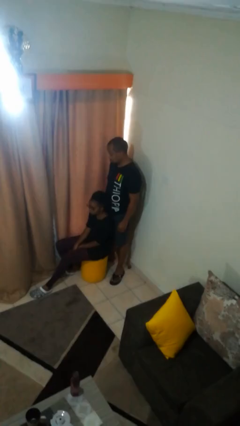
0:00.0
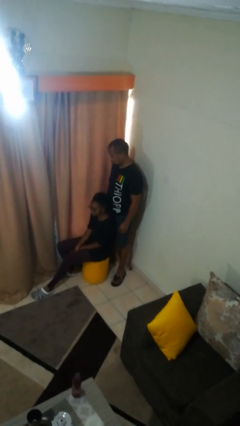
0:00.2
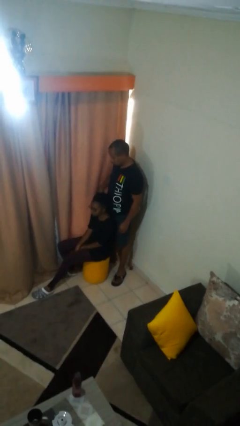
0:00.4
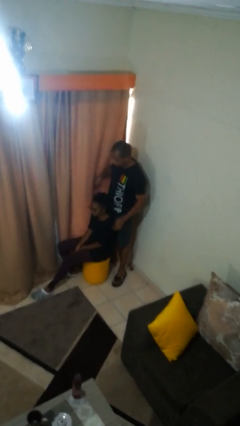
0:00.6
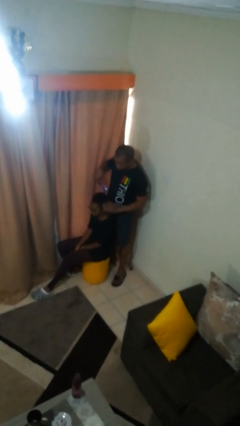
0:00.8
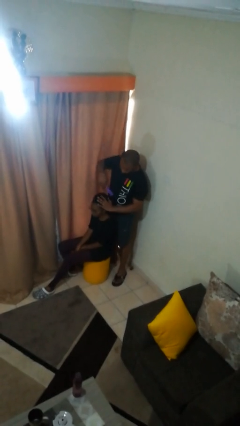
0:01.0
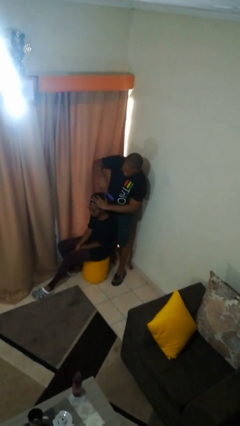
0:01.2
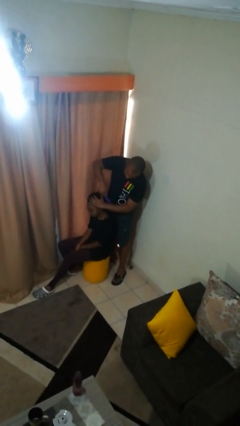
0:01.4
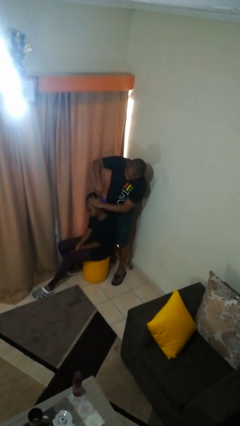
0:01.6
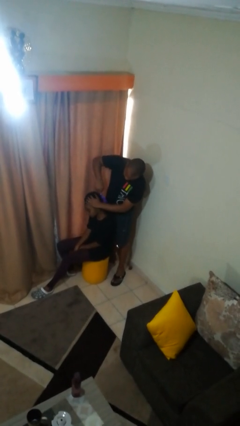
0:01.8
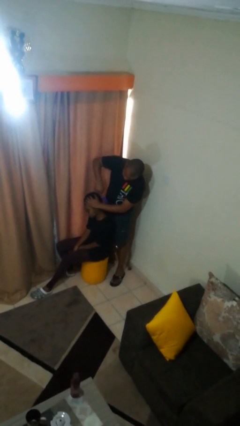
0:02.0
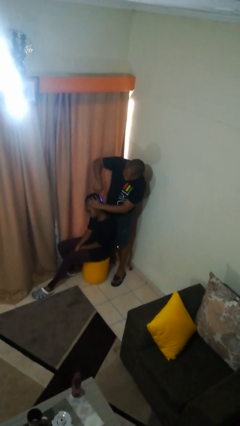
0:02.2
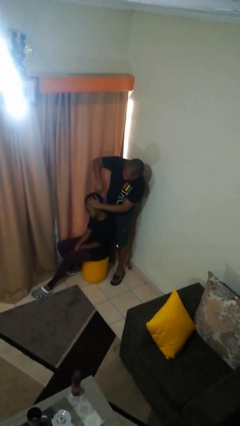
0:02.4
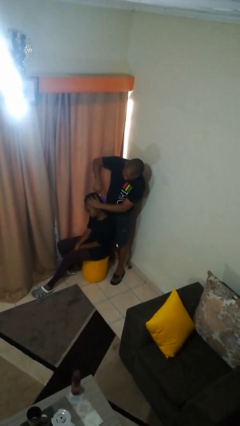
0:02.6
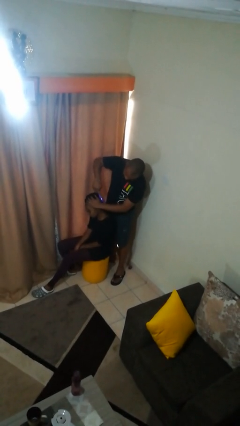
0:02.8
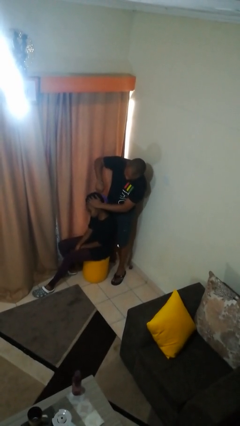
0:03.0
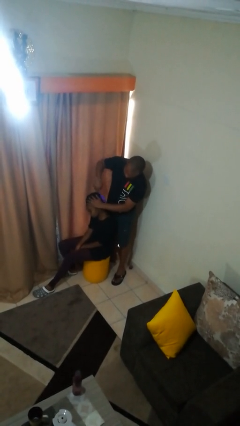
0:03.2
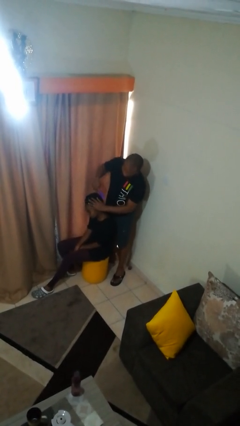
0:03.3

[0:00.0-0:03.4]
person brushes hair of person

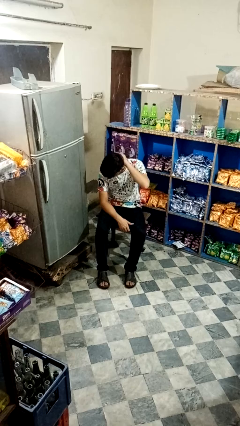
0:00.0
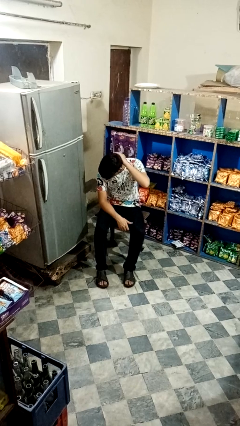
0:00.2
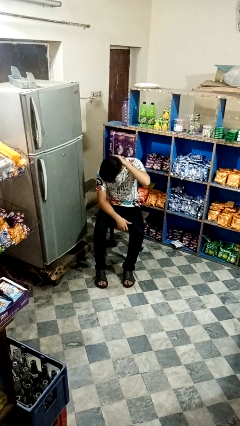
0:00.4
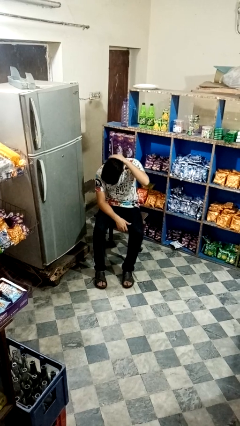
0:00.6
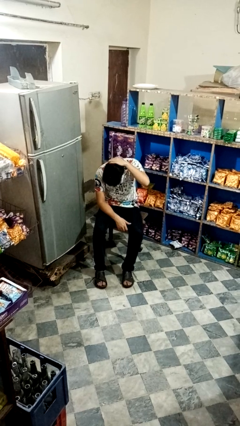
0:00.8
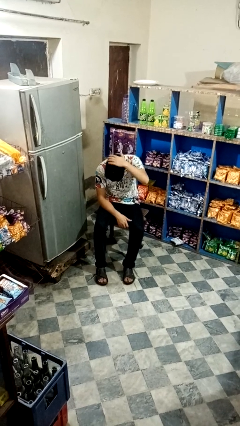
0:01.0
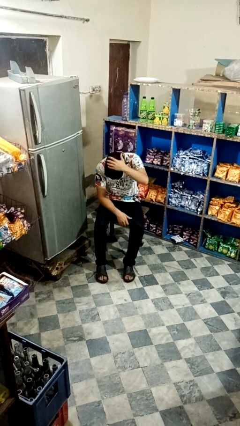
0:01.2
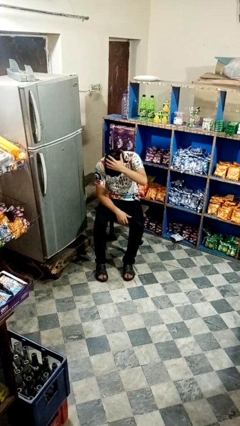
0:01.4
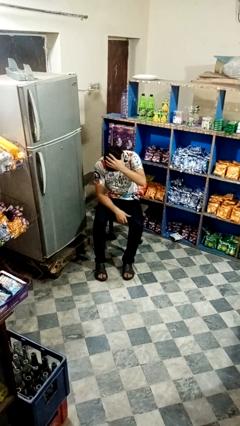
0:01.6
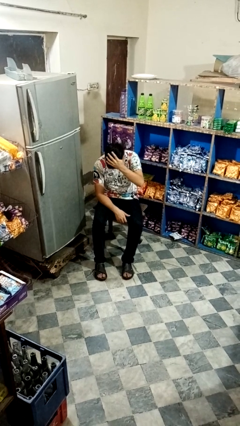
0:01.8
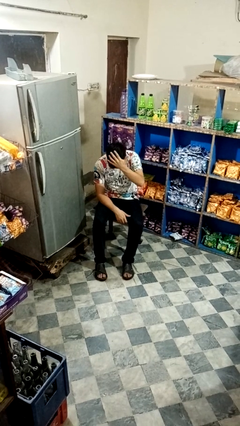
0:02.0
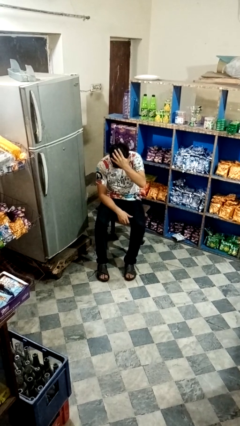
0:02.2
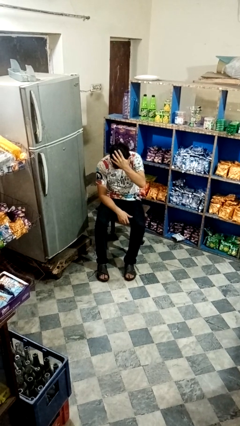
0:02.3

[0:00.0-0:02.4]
person pats head

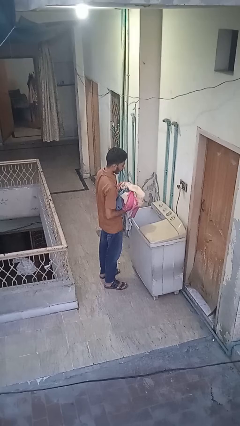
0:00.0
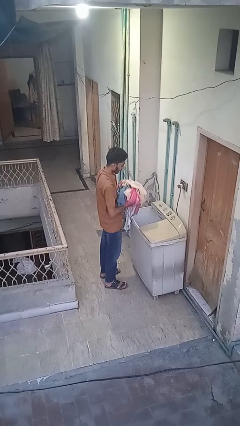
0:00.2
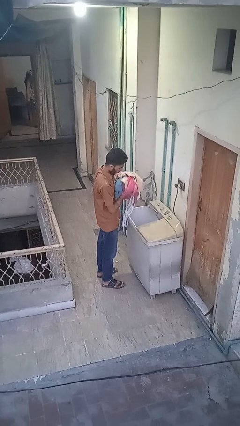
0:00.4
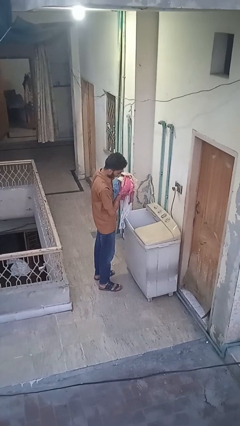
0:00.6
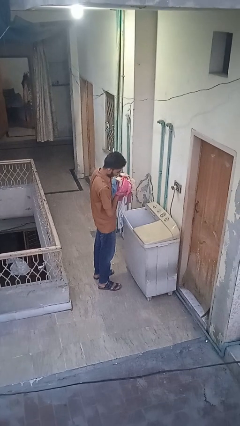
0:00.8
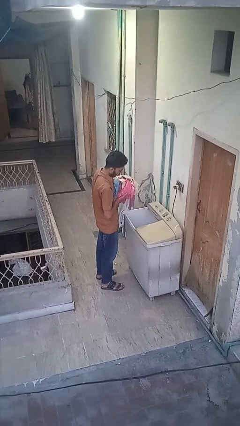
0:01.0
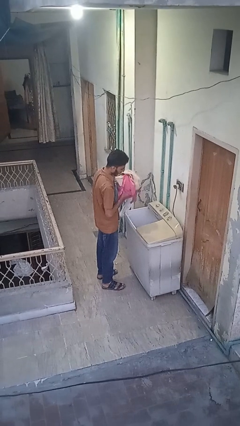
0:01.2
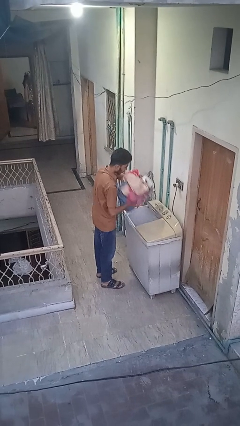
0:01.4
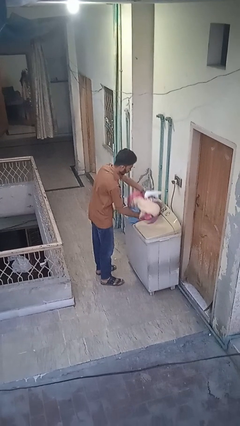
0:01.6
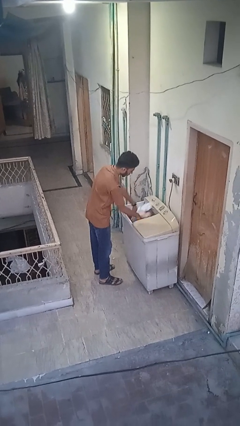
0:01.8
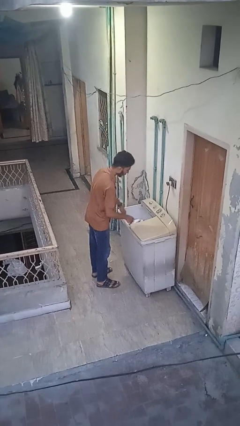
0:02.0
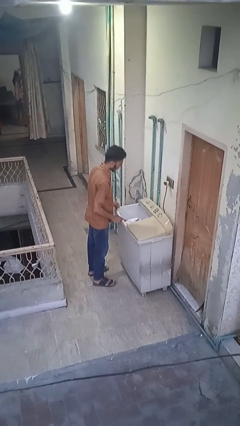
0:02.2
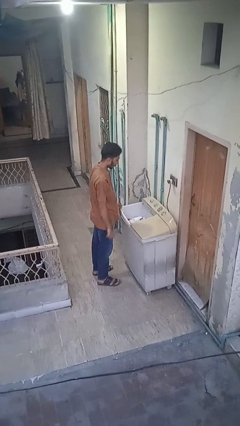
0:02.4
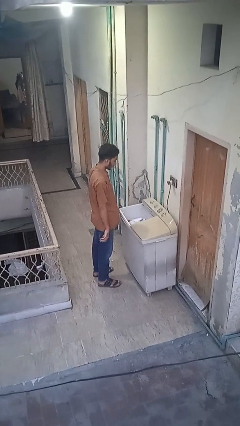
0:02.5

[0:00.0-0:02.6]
person loads clotheswasher

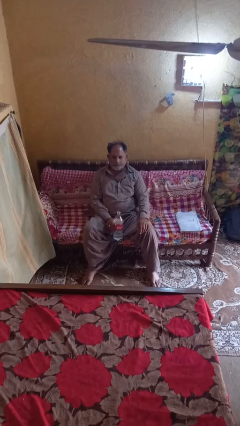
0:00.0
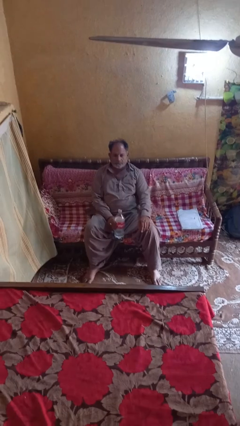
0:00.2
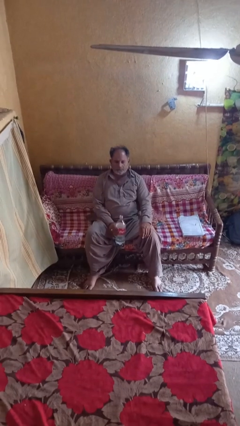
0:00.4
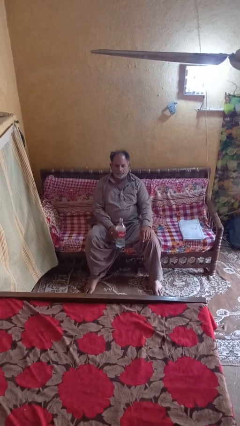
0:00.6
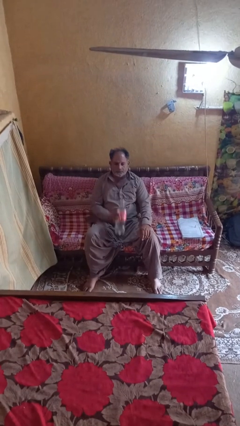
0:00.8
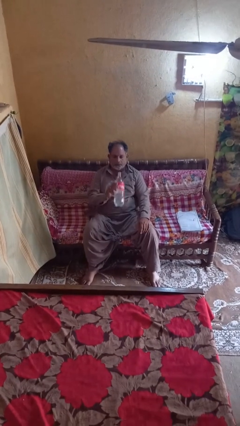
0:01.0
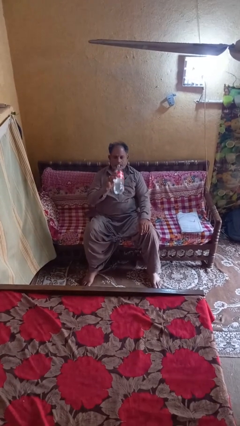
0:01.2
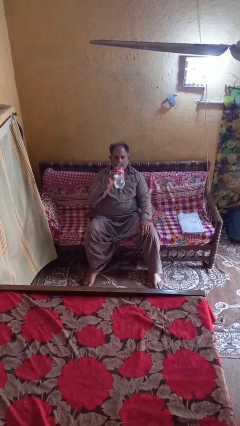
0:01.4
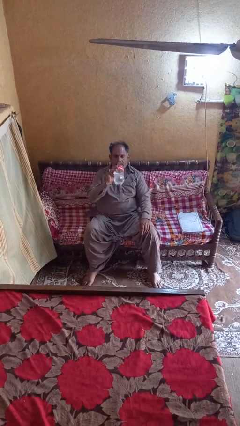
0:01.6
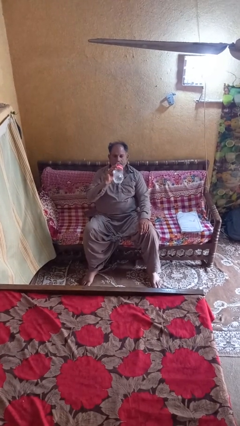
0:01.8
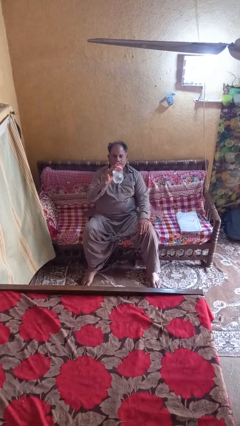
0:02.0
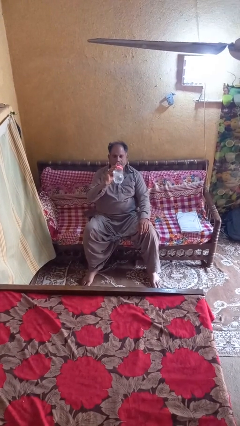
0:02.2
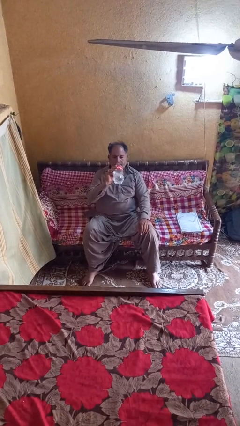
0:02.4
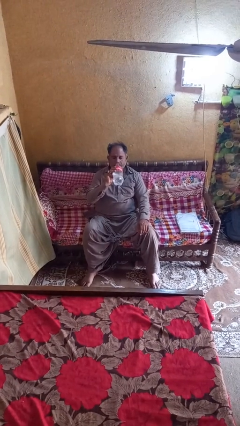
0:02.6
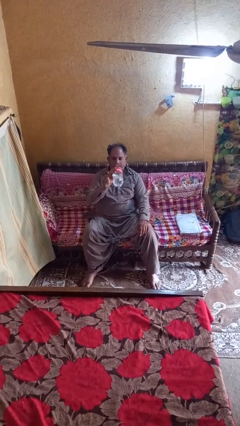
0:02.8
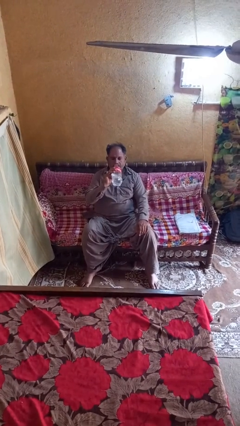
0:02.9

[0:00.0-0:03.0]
person drinks from bottle

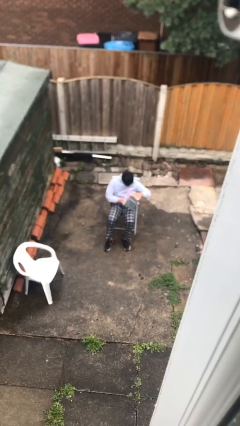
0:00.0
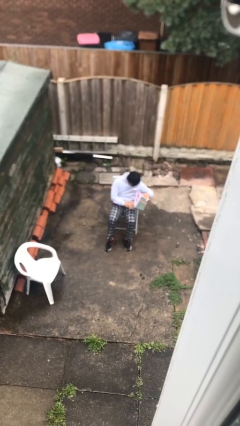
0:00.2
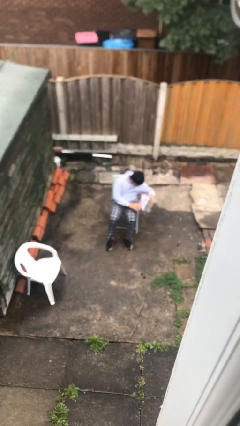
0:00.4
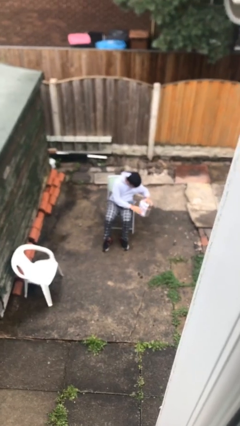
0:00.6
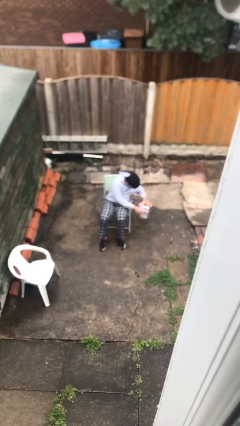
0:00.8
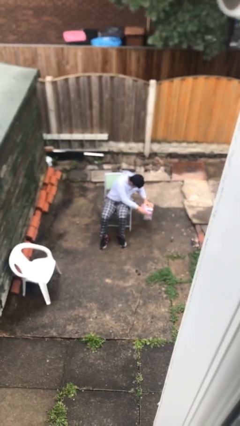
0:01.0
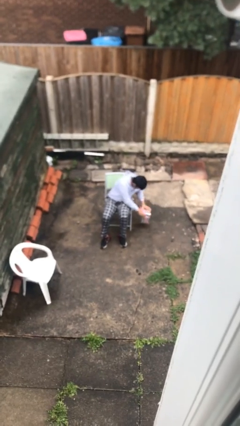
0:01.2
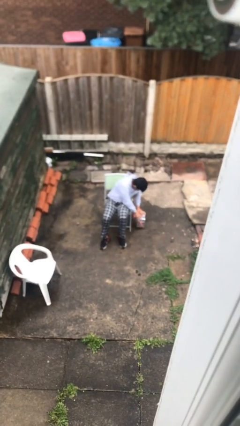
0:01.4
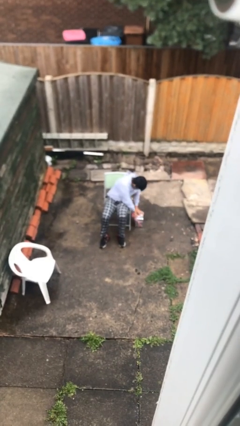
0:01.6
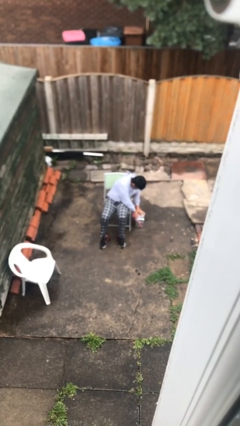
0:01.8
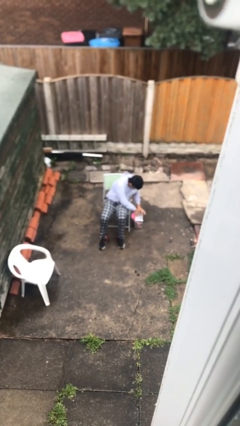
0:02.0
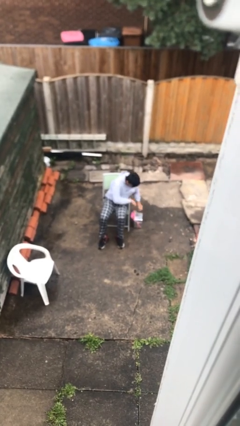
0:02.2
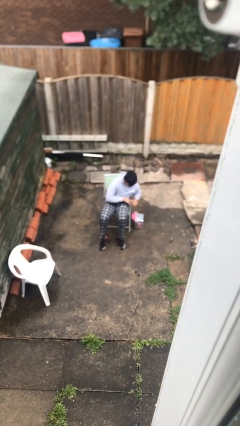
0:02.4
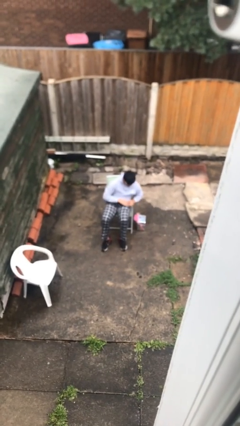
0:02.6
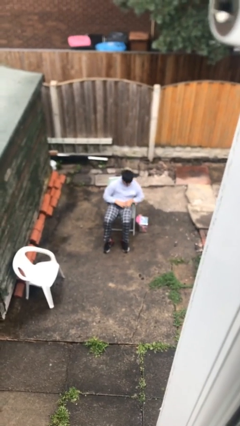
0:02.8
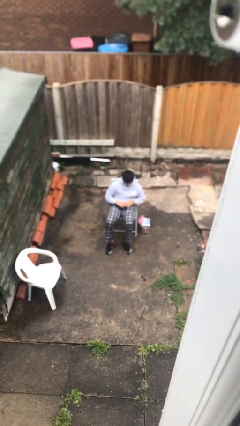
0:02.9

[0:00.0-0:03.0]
person puts down object on floor

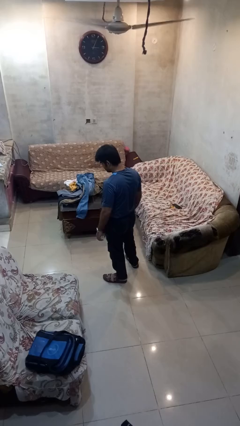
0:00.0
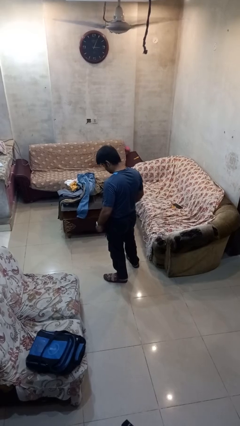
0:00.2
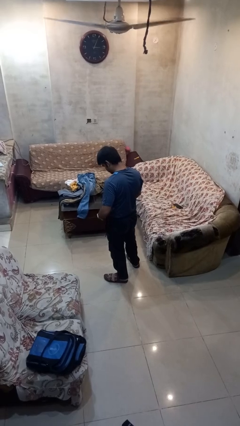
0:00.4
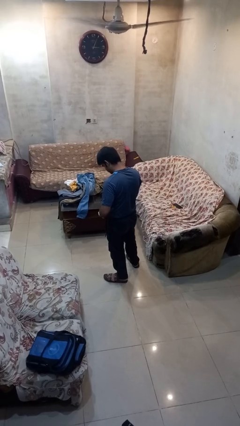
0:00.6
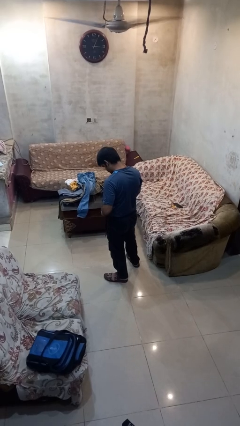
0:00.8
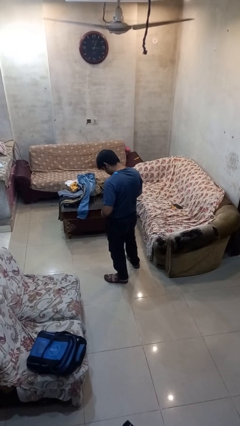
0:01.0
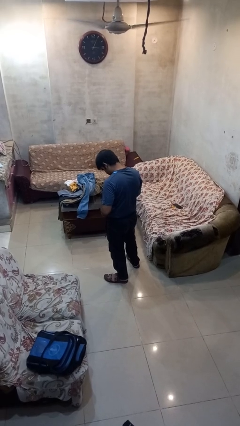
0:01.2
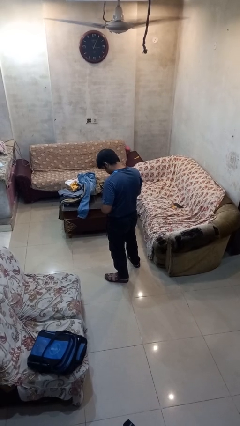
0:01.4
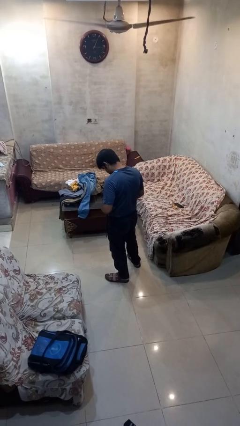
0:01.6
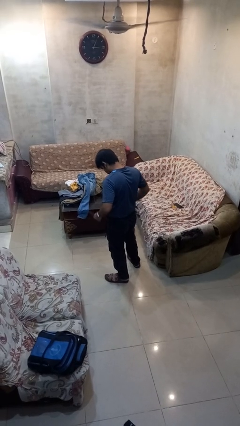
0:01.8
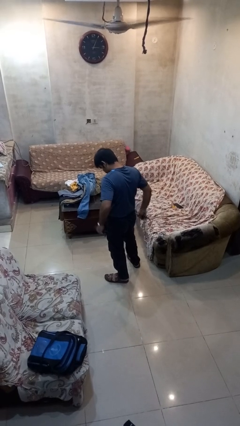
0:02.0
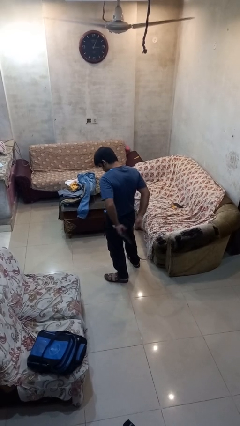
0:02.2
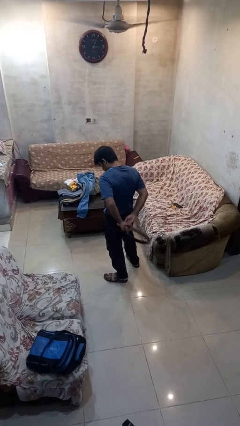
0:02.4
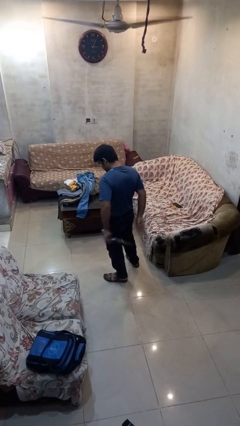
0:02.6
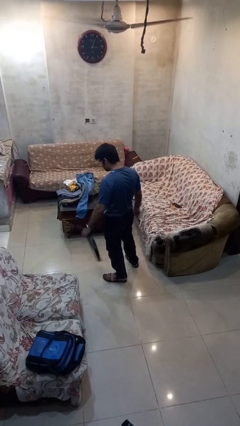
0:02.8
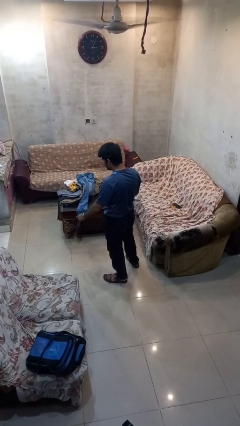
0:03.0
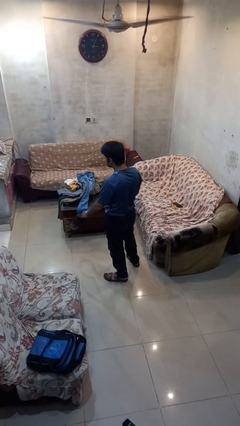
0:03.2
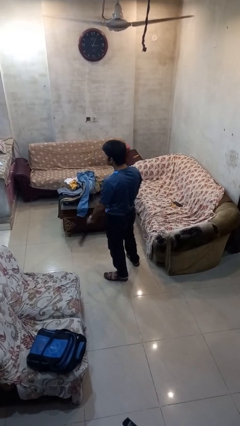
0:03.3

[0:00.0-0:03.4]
person takes off belt
